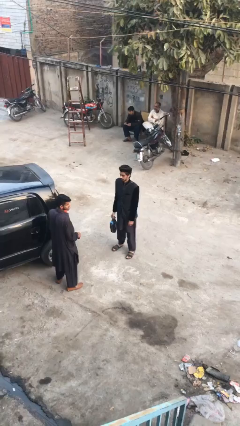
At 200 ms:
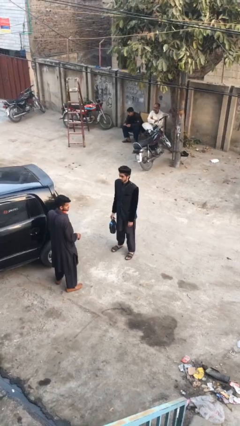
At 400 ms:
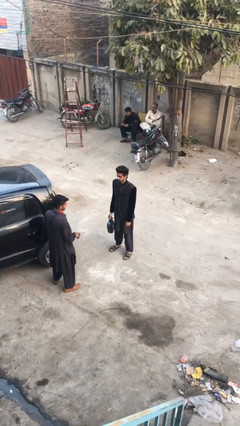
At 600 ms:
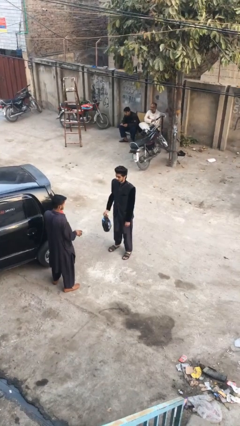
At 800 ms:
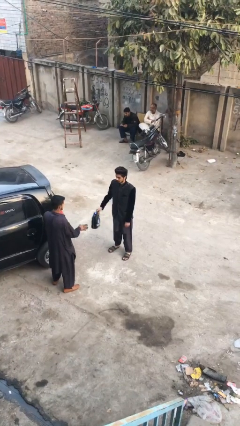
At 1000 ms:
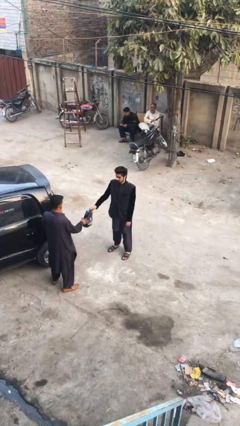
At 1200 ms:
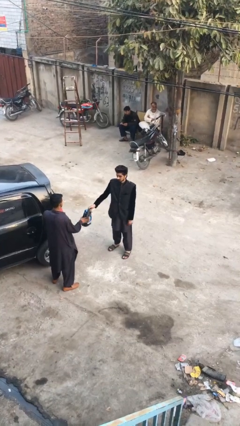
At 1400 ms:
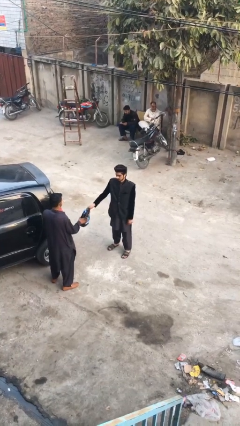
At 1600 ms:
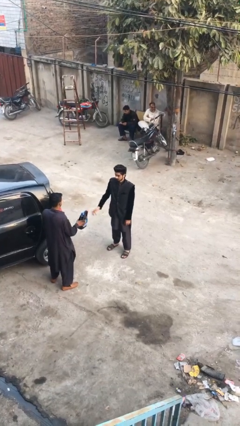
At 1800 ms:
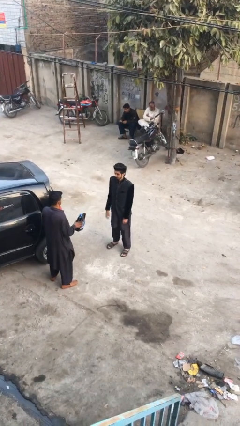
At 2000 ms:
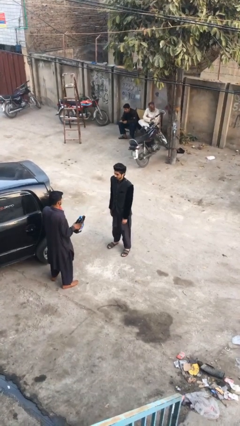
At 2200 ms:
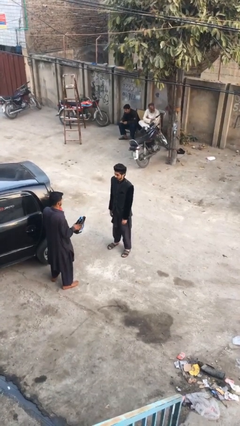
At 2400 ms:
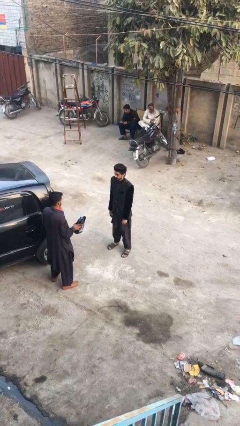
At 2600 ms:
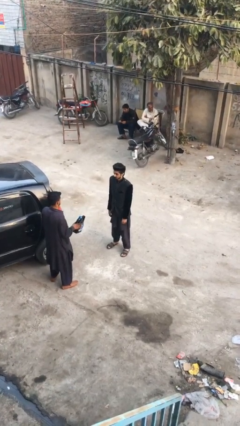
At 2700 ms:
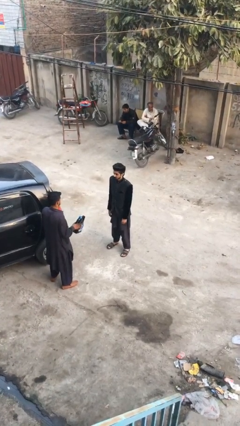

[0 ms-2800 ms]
person transfers object to person

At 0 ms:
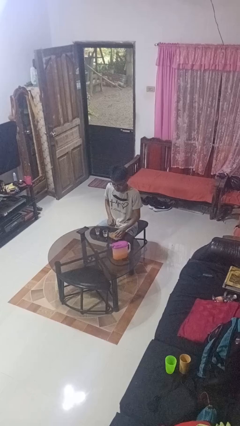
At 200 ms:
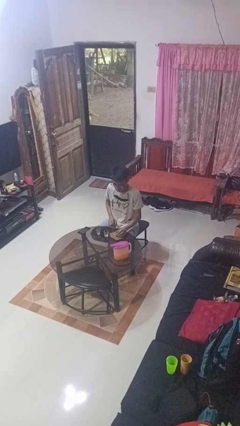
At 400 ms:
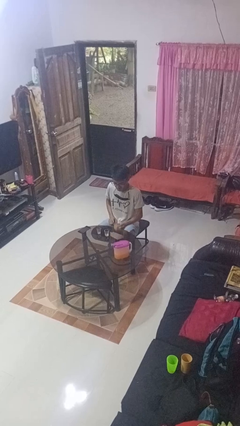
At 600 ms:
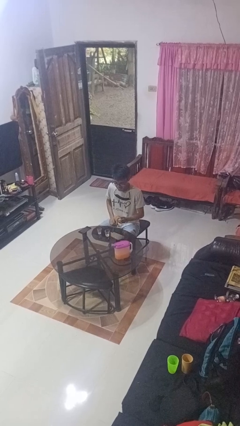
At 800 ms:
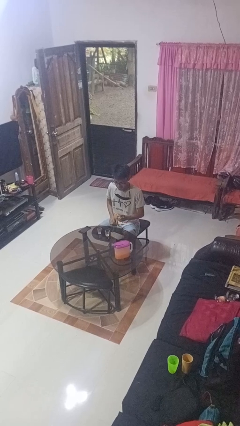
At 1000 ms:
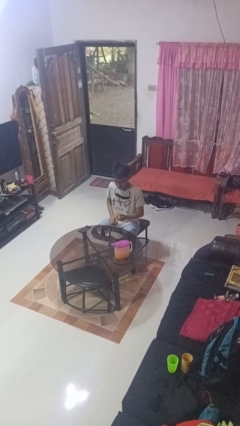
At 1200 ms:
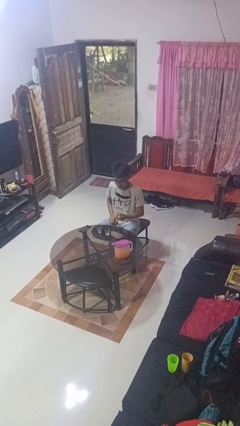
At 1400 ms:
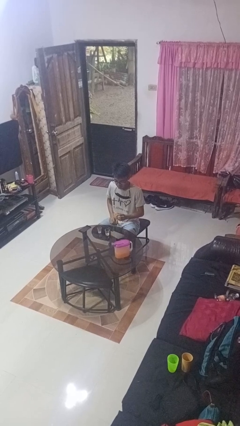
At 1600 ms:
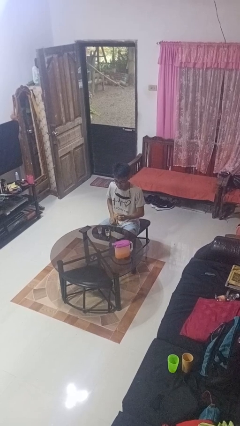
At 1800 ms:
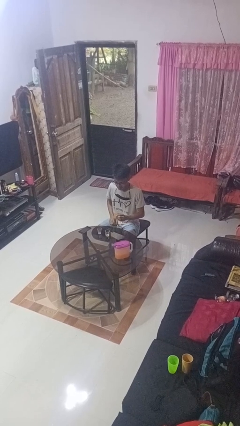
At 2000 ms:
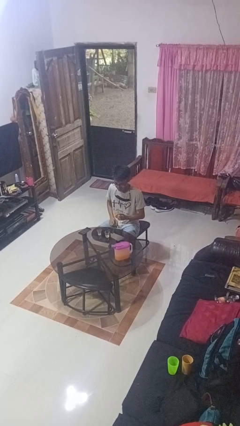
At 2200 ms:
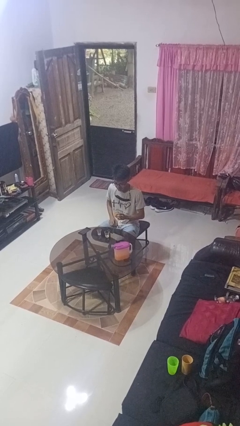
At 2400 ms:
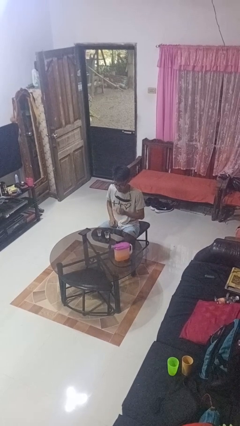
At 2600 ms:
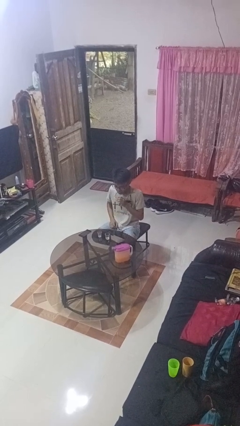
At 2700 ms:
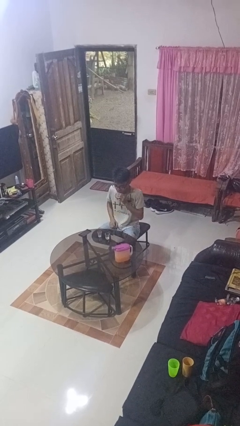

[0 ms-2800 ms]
person picks up object from table

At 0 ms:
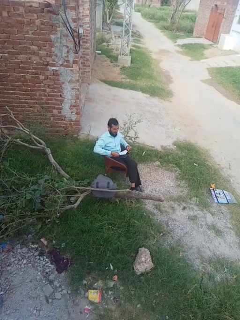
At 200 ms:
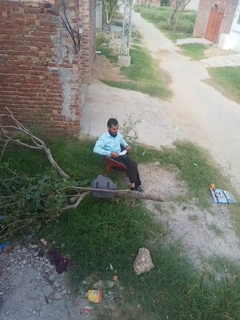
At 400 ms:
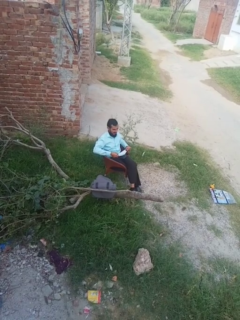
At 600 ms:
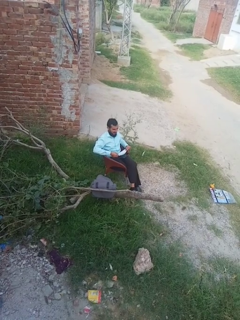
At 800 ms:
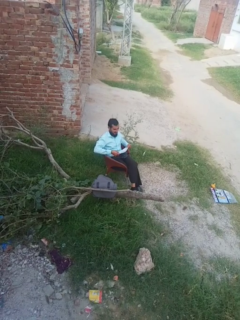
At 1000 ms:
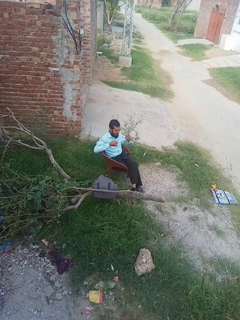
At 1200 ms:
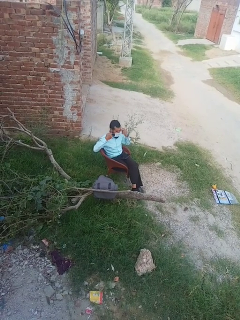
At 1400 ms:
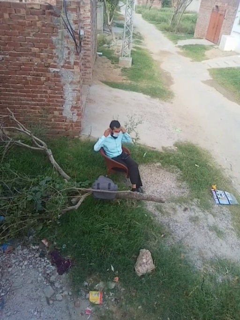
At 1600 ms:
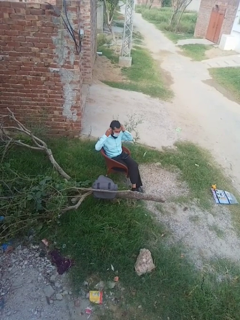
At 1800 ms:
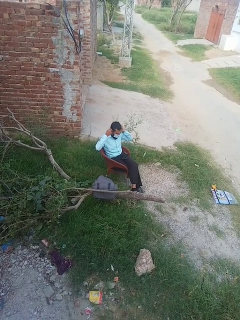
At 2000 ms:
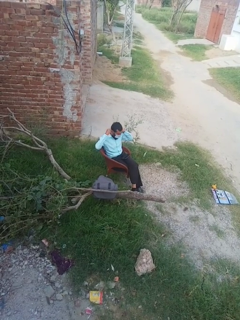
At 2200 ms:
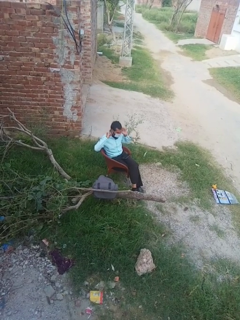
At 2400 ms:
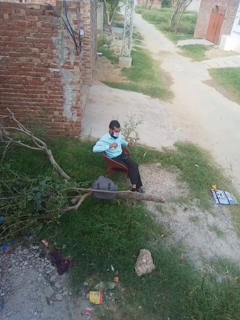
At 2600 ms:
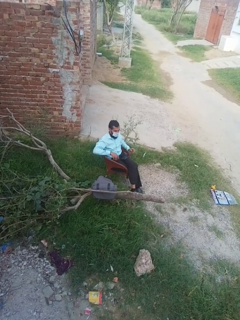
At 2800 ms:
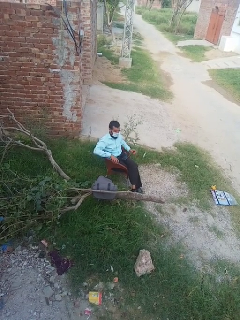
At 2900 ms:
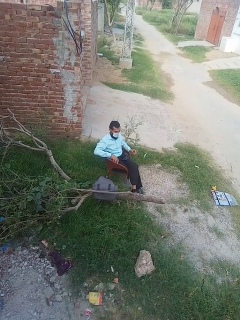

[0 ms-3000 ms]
person puts on facemask

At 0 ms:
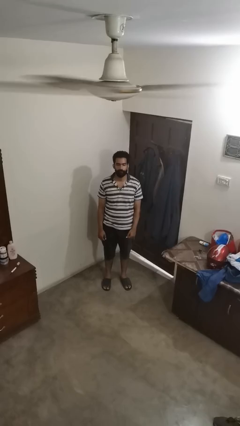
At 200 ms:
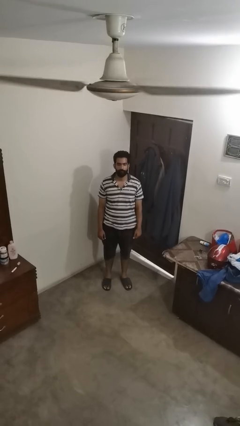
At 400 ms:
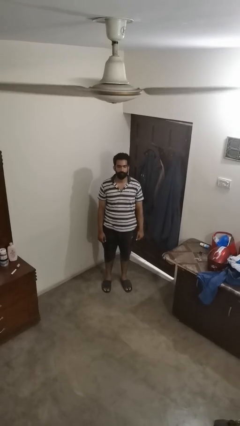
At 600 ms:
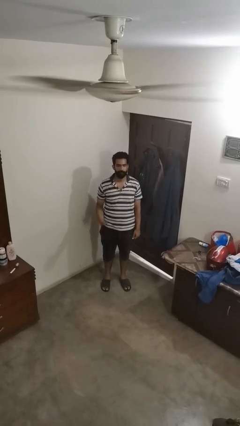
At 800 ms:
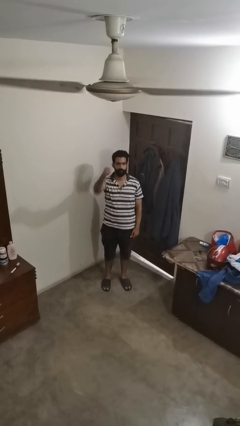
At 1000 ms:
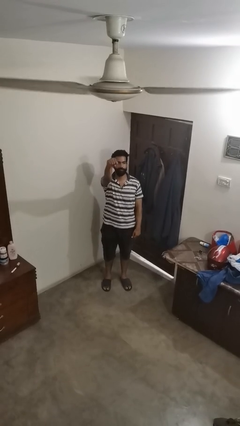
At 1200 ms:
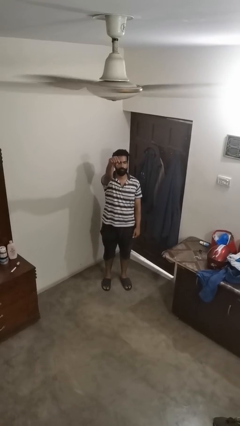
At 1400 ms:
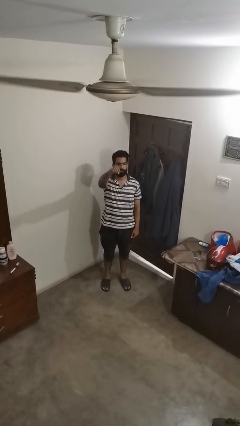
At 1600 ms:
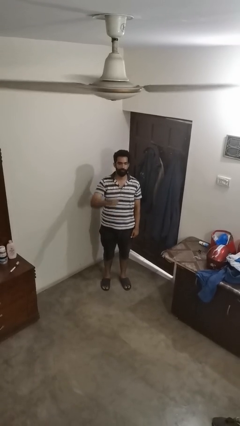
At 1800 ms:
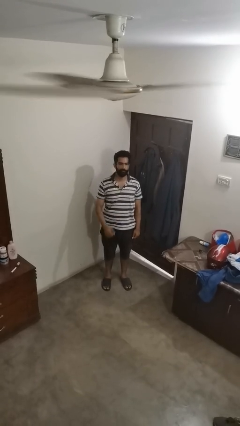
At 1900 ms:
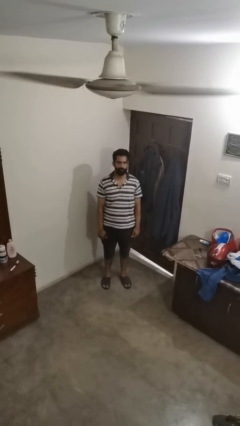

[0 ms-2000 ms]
person punches

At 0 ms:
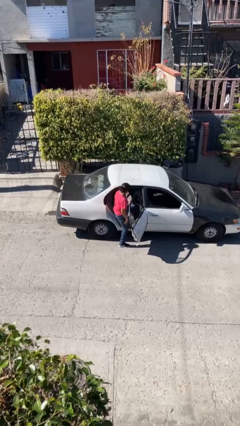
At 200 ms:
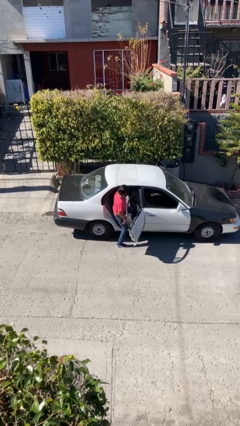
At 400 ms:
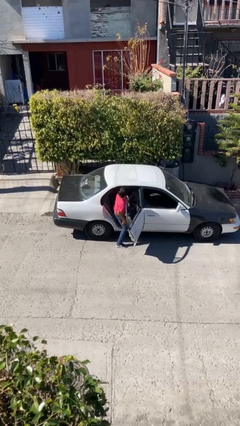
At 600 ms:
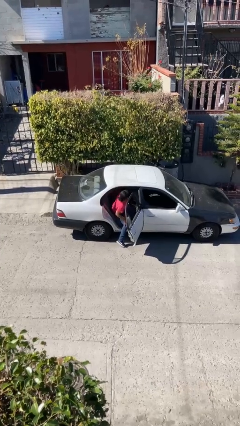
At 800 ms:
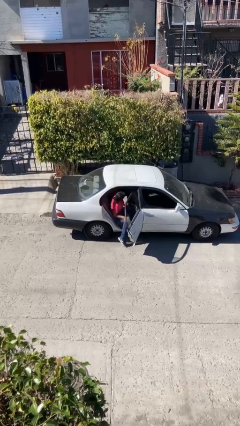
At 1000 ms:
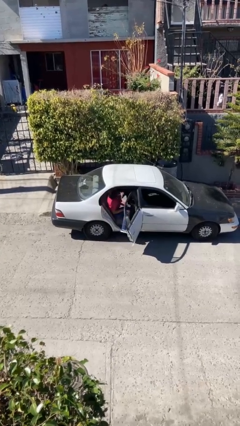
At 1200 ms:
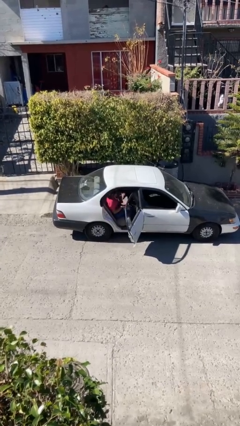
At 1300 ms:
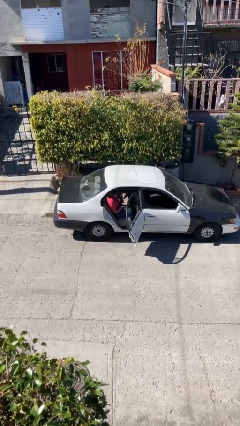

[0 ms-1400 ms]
person enters car

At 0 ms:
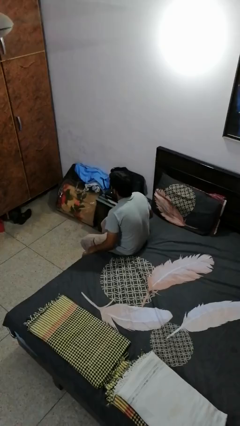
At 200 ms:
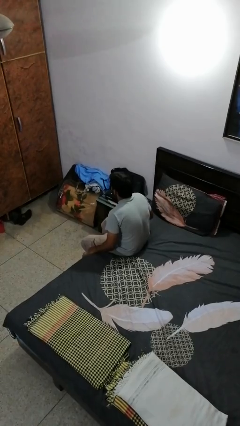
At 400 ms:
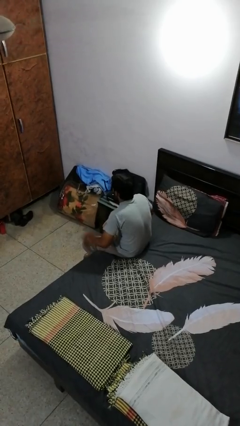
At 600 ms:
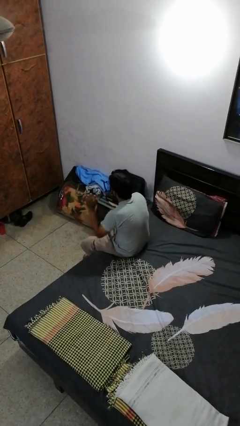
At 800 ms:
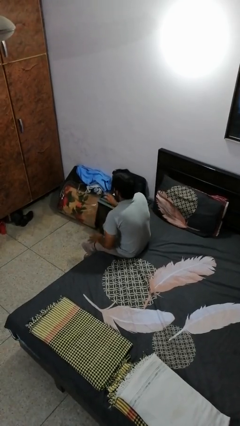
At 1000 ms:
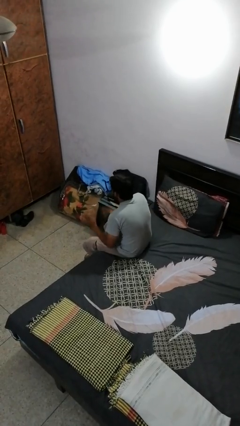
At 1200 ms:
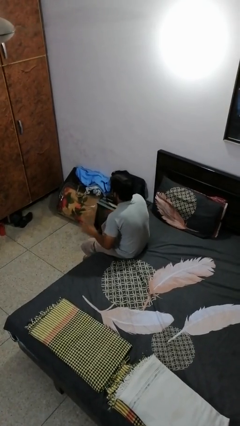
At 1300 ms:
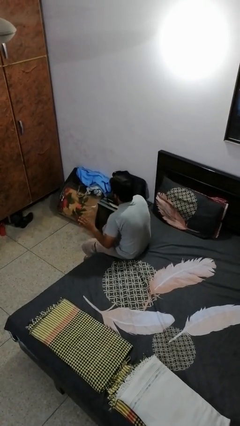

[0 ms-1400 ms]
person slaps hands on thighs

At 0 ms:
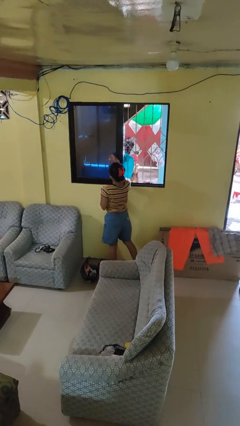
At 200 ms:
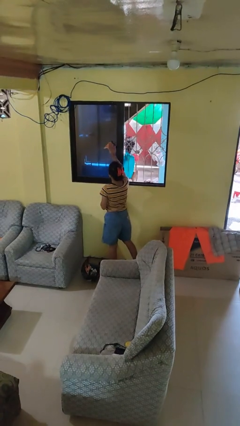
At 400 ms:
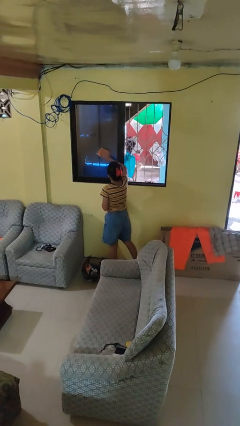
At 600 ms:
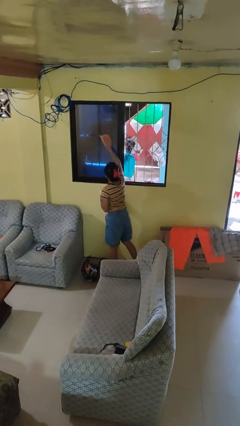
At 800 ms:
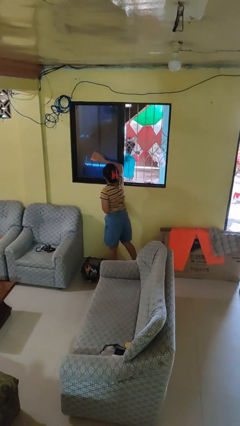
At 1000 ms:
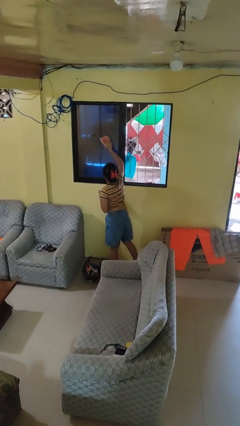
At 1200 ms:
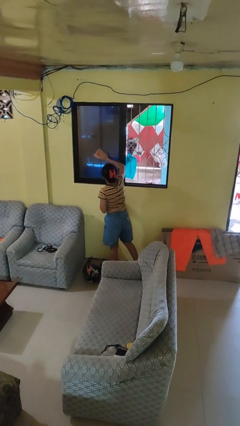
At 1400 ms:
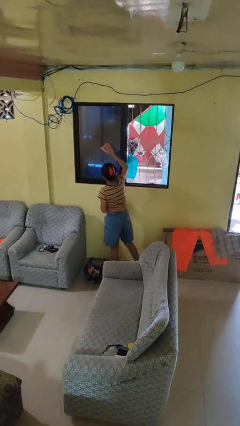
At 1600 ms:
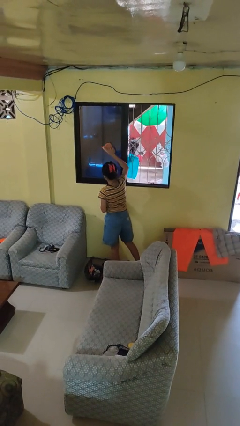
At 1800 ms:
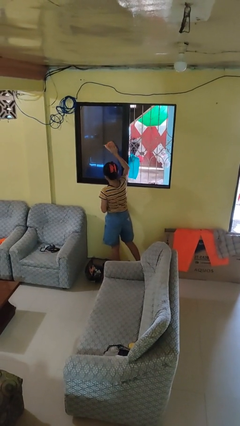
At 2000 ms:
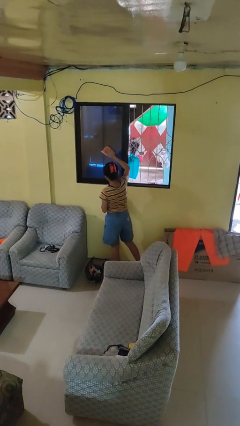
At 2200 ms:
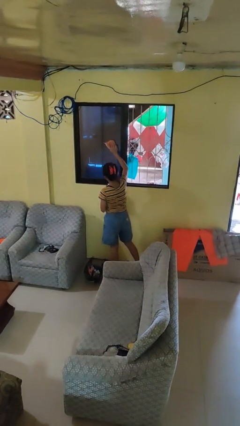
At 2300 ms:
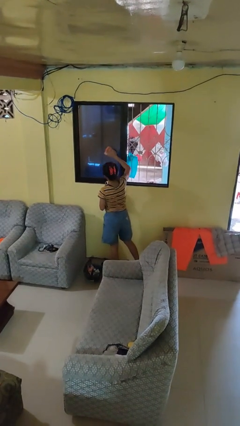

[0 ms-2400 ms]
person washes window

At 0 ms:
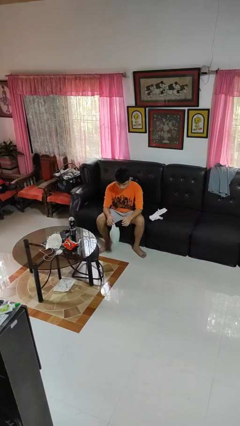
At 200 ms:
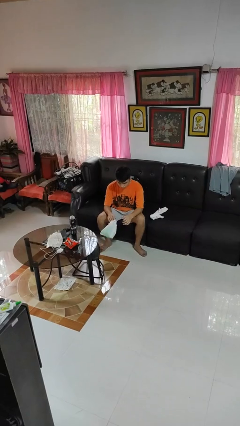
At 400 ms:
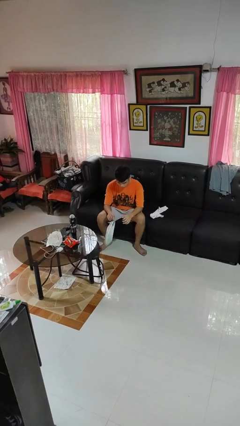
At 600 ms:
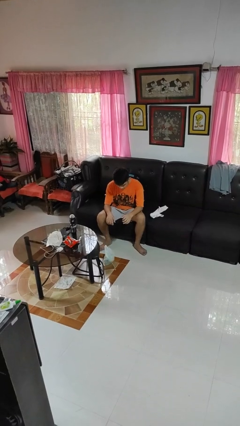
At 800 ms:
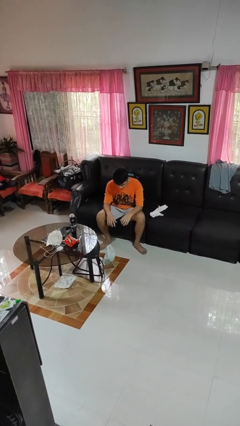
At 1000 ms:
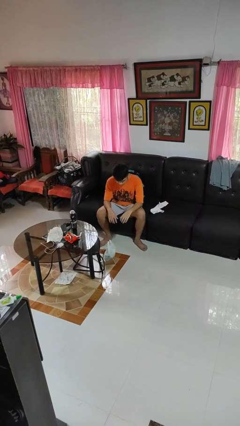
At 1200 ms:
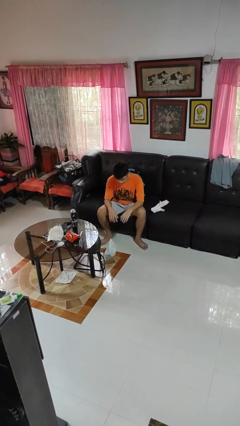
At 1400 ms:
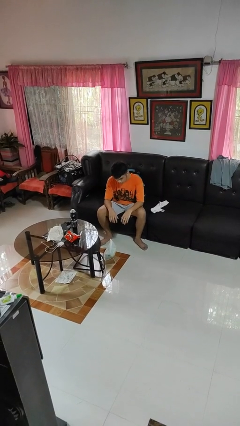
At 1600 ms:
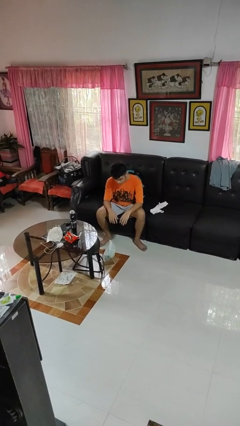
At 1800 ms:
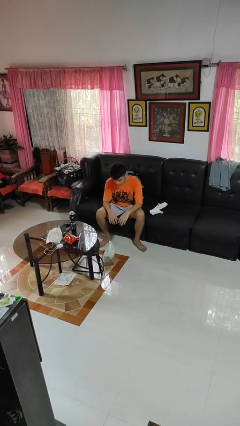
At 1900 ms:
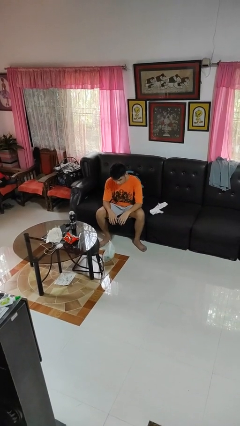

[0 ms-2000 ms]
person drops object
